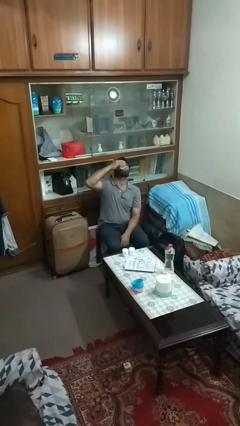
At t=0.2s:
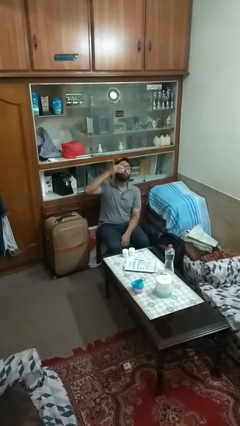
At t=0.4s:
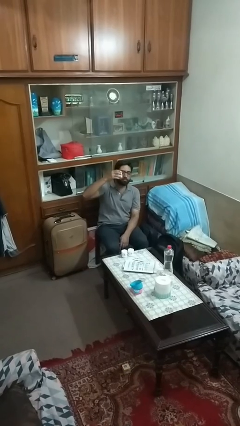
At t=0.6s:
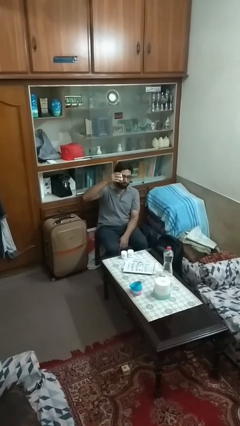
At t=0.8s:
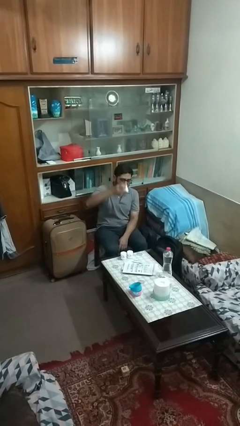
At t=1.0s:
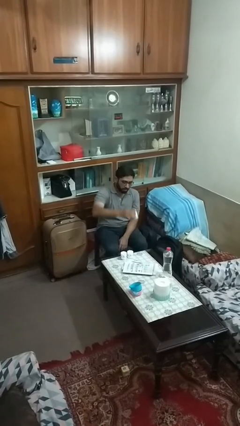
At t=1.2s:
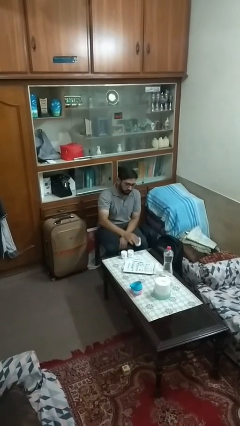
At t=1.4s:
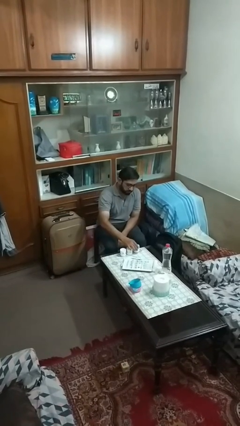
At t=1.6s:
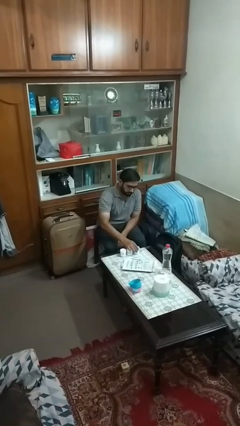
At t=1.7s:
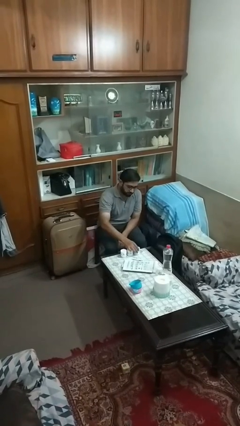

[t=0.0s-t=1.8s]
person puts down object on table

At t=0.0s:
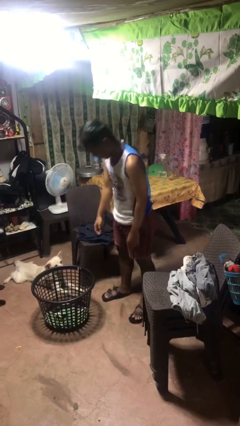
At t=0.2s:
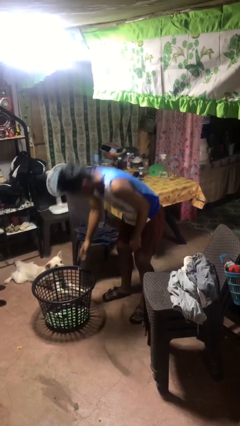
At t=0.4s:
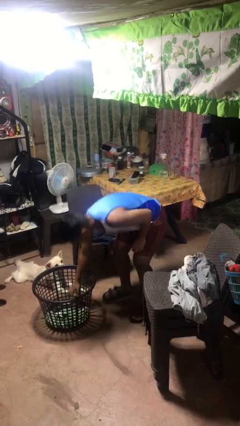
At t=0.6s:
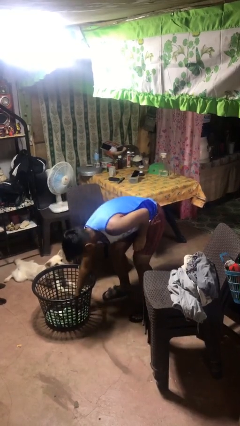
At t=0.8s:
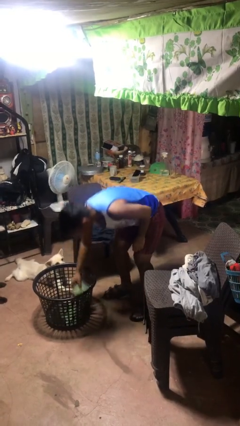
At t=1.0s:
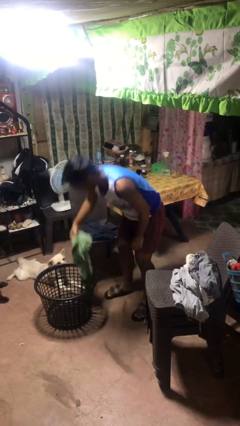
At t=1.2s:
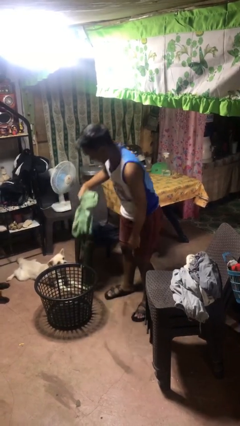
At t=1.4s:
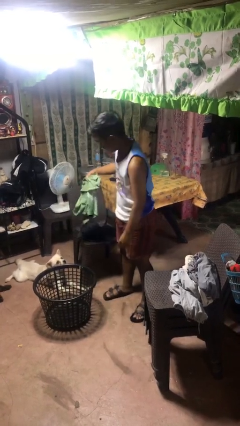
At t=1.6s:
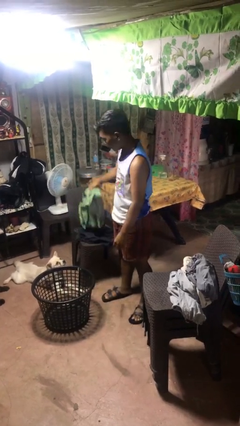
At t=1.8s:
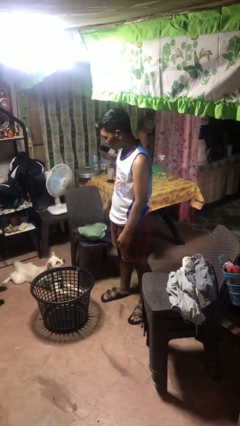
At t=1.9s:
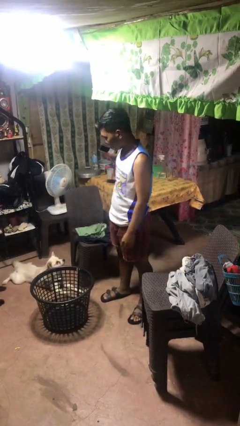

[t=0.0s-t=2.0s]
person takes object from basket

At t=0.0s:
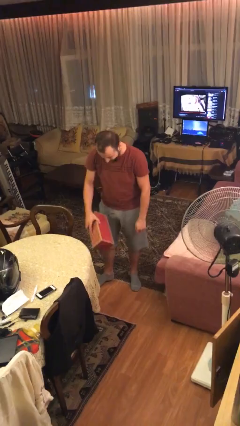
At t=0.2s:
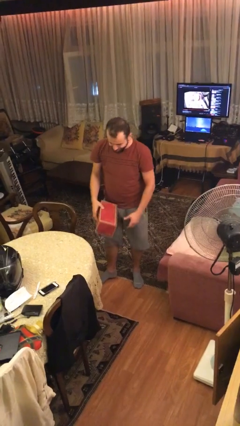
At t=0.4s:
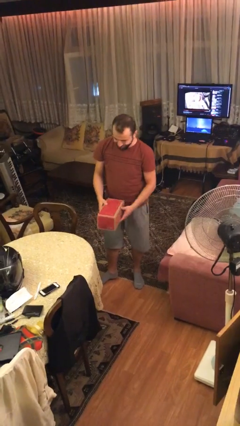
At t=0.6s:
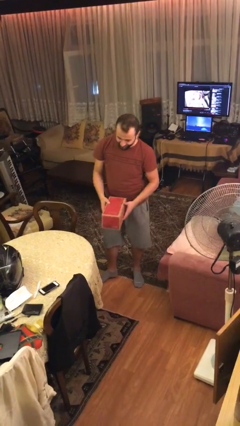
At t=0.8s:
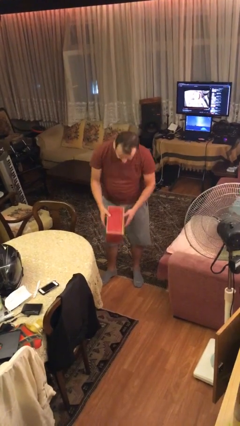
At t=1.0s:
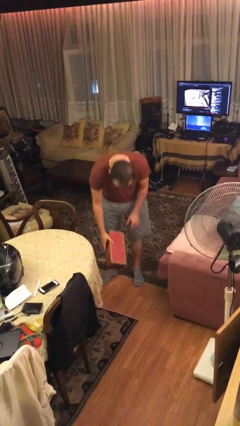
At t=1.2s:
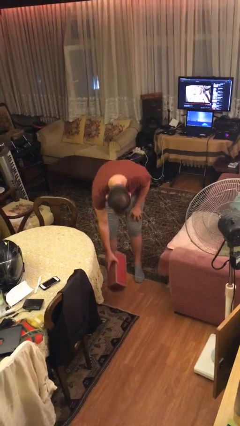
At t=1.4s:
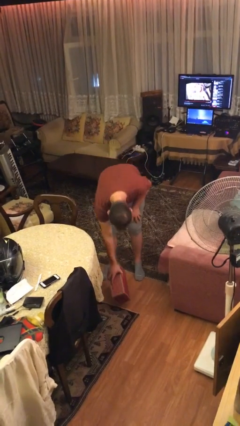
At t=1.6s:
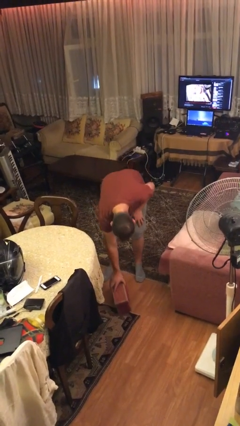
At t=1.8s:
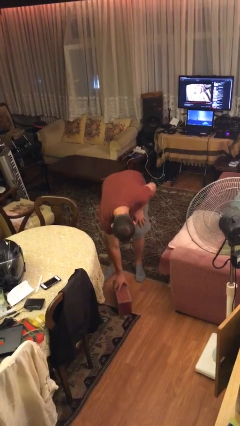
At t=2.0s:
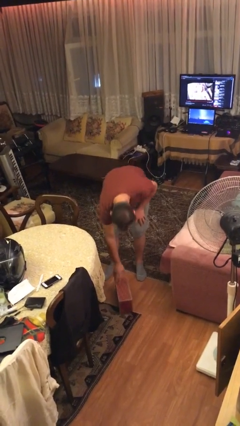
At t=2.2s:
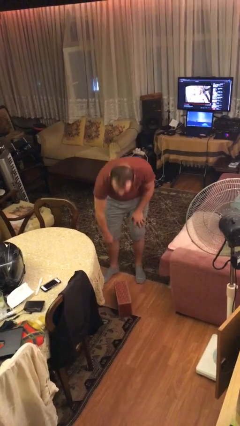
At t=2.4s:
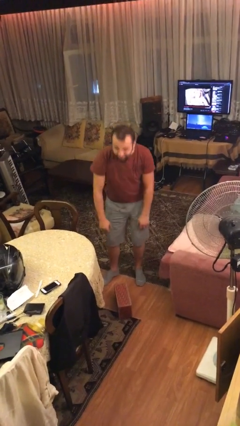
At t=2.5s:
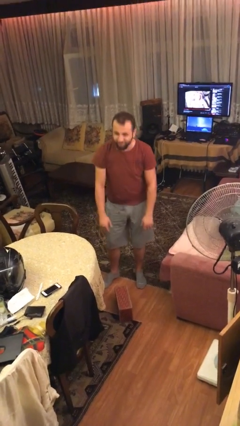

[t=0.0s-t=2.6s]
person puts down object on floor

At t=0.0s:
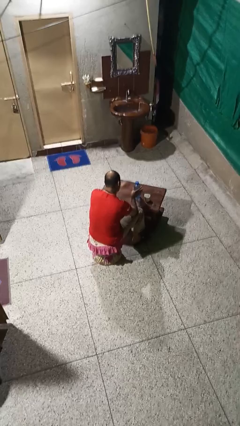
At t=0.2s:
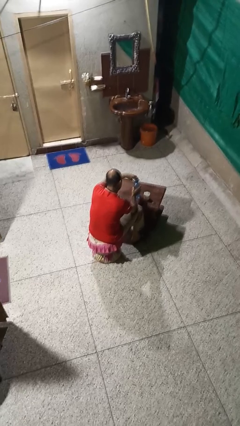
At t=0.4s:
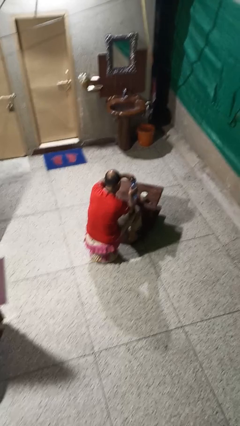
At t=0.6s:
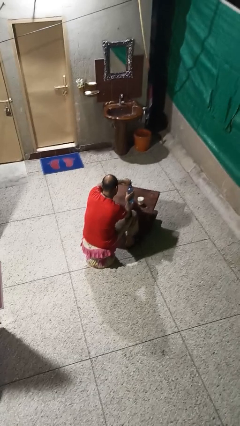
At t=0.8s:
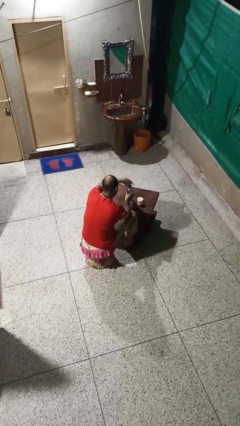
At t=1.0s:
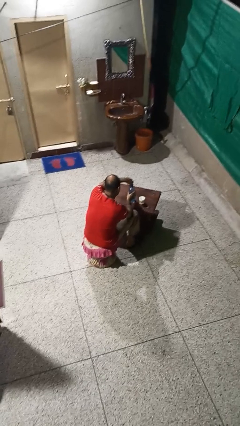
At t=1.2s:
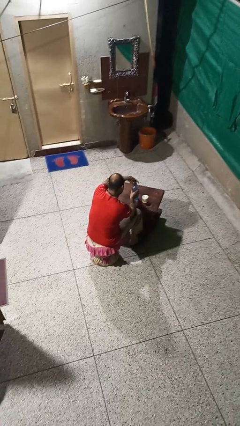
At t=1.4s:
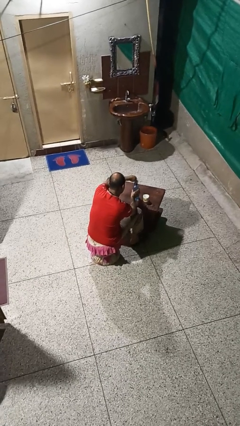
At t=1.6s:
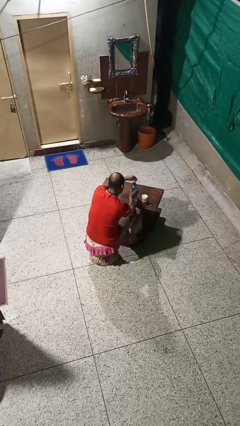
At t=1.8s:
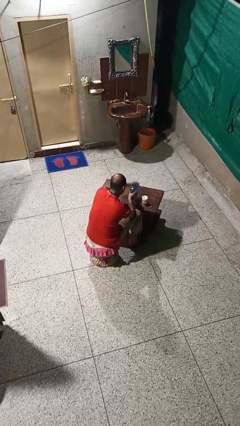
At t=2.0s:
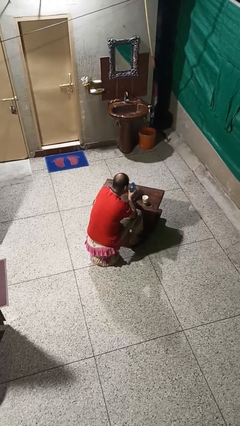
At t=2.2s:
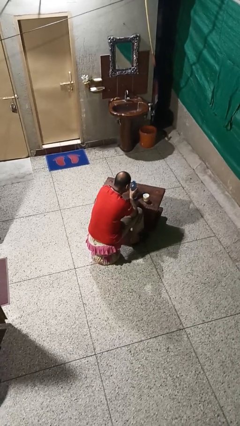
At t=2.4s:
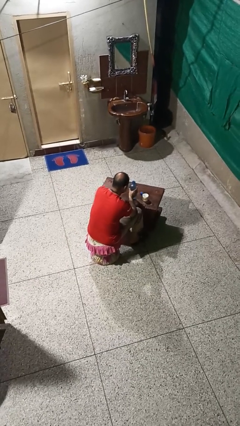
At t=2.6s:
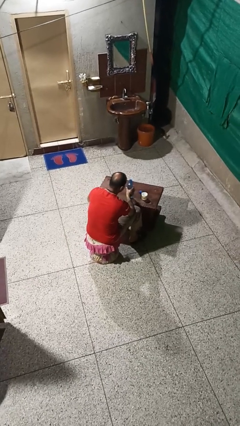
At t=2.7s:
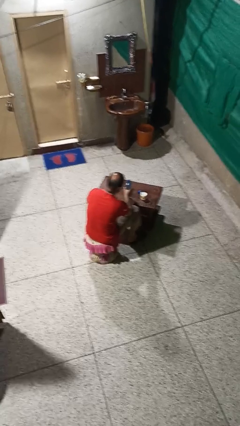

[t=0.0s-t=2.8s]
person unscrews lid from bottle

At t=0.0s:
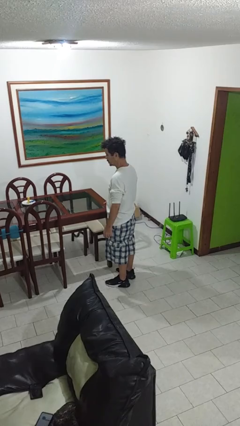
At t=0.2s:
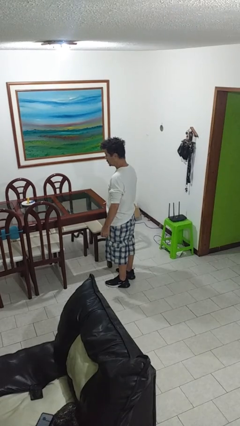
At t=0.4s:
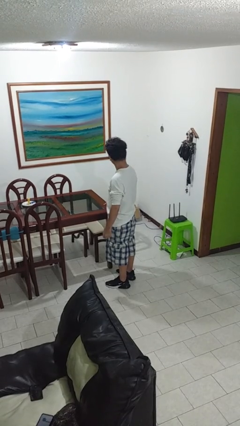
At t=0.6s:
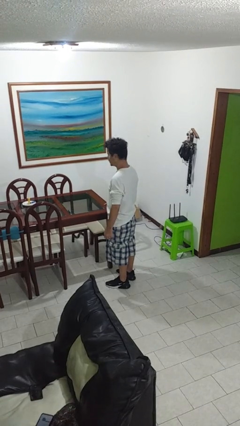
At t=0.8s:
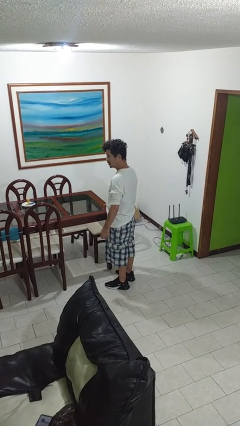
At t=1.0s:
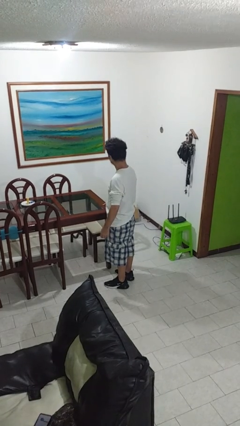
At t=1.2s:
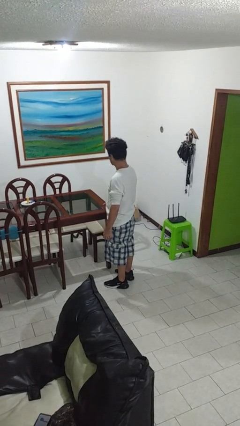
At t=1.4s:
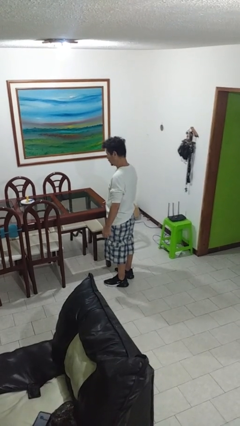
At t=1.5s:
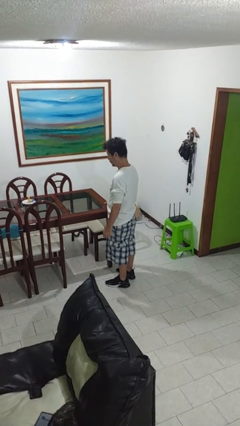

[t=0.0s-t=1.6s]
person shakes head

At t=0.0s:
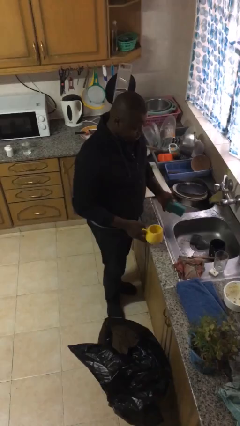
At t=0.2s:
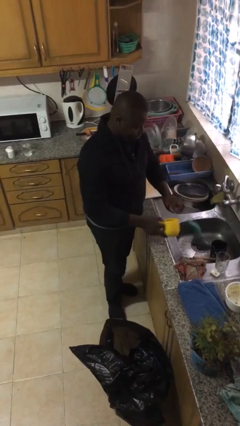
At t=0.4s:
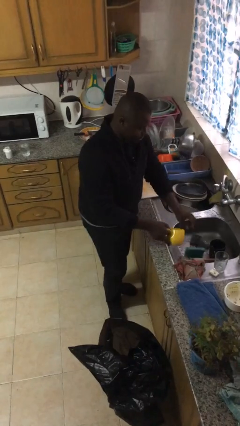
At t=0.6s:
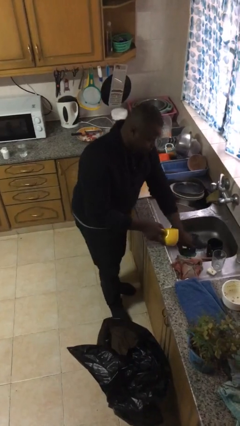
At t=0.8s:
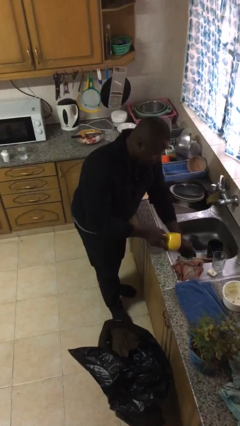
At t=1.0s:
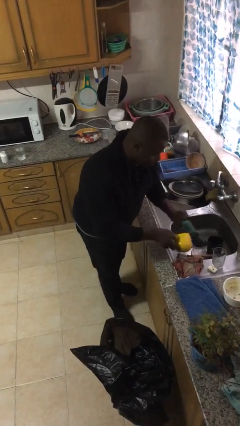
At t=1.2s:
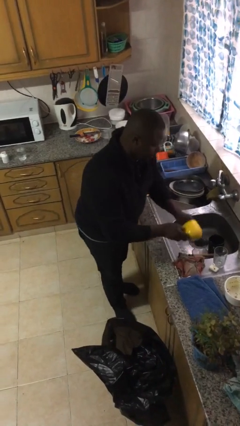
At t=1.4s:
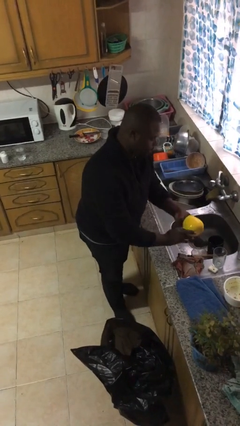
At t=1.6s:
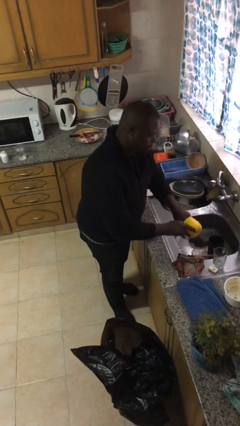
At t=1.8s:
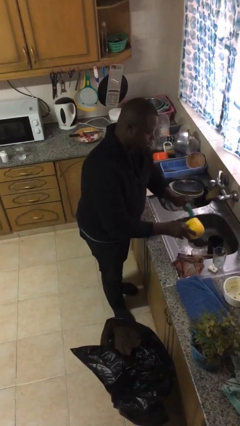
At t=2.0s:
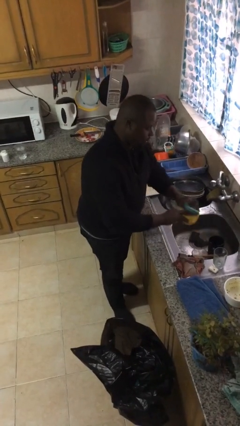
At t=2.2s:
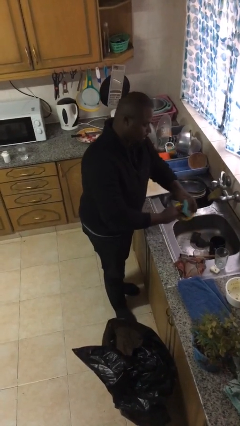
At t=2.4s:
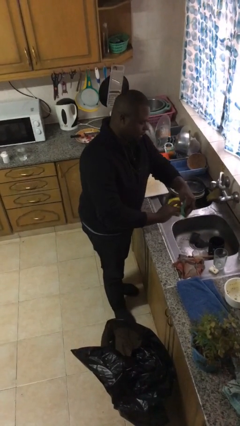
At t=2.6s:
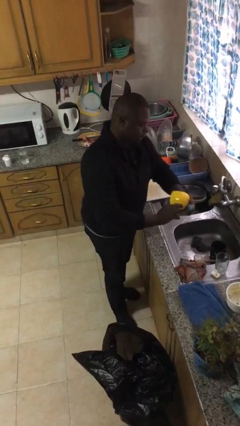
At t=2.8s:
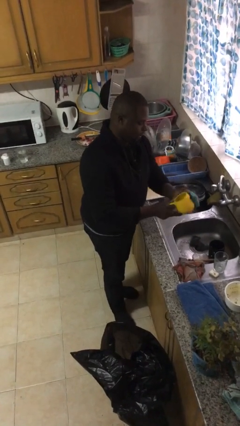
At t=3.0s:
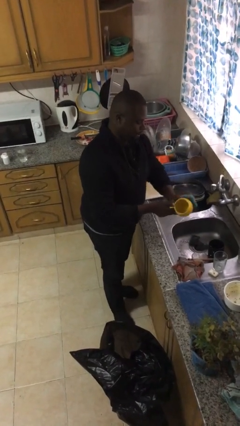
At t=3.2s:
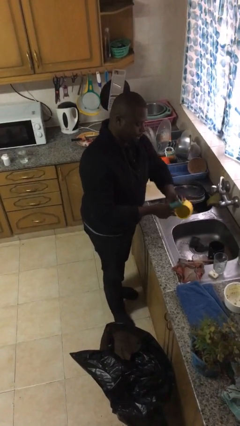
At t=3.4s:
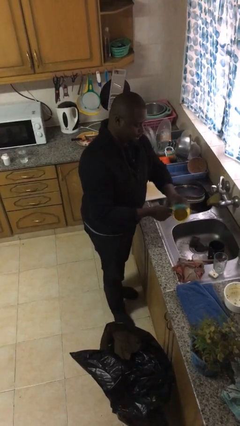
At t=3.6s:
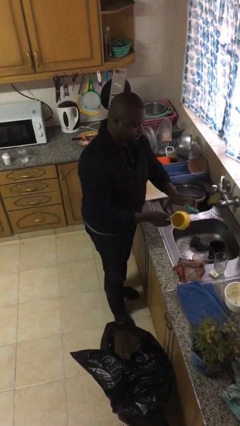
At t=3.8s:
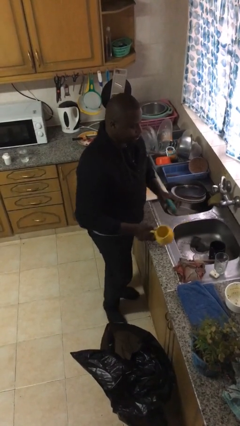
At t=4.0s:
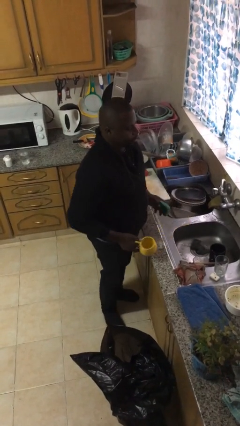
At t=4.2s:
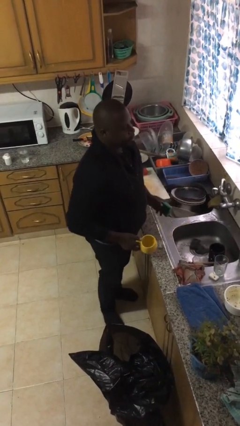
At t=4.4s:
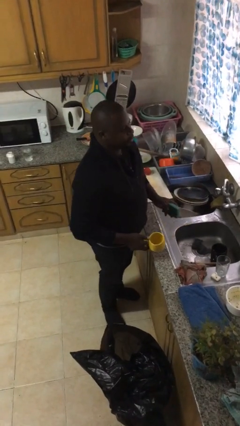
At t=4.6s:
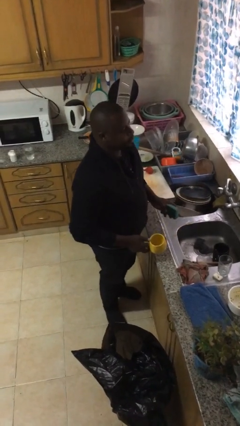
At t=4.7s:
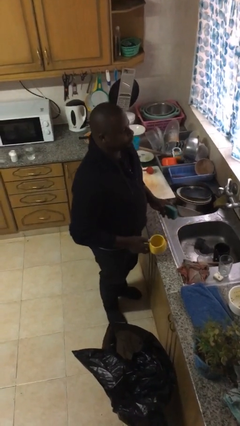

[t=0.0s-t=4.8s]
person washes dish

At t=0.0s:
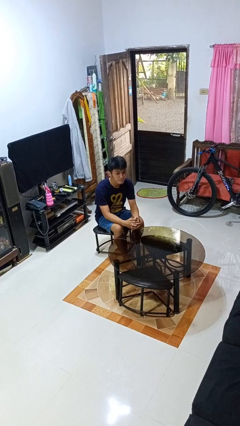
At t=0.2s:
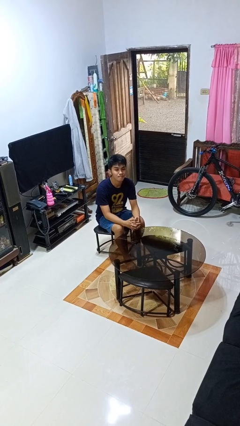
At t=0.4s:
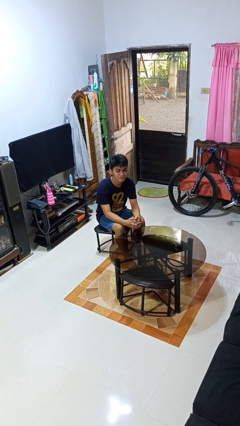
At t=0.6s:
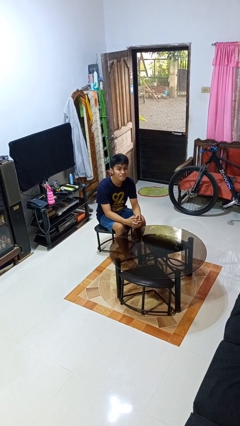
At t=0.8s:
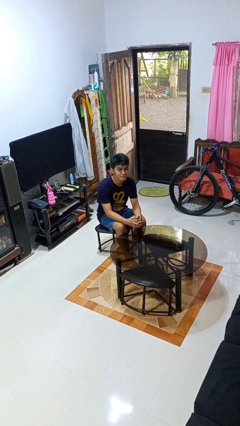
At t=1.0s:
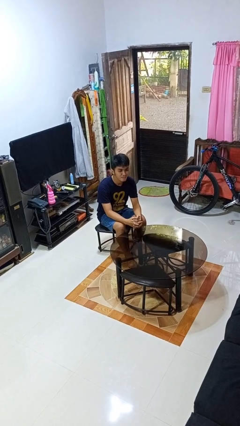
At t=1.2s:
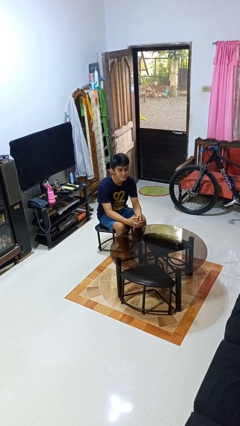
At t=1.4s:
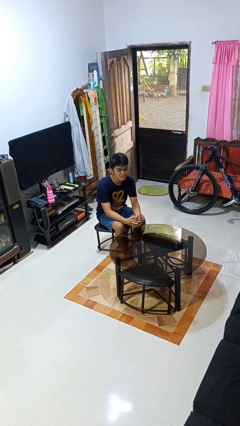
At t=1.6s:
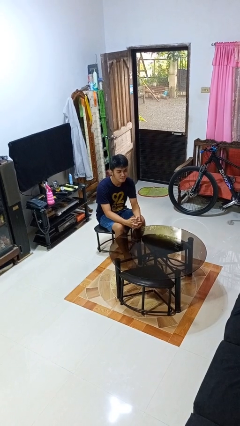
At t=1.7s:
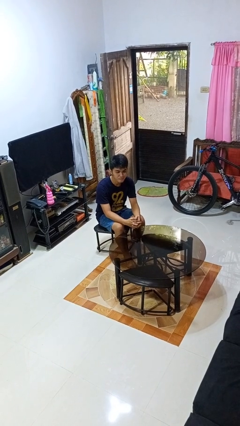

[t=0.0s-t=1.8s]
person nods head
